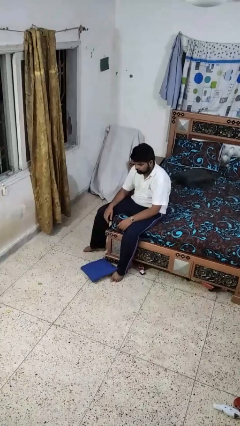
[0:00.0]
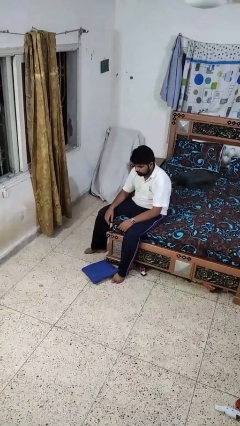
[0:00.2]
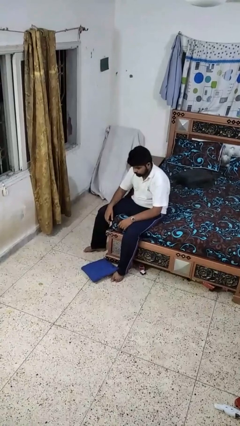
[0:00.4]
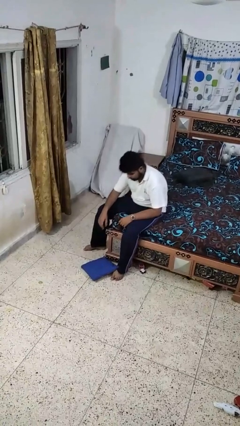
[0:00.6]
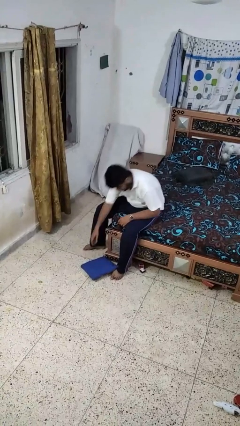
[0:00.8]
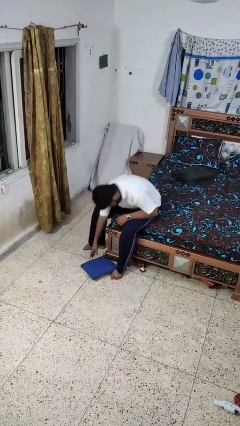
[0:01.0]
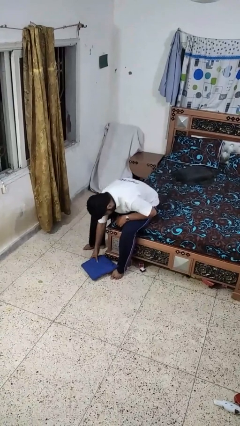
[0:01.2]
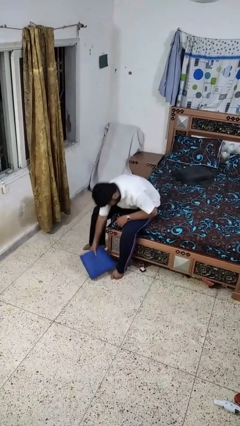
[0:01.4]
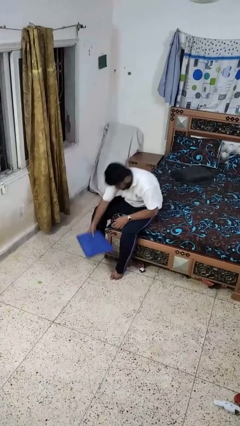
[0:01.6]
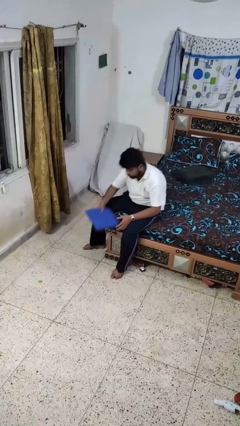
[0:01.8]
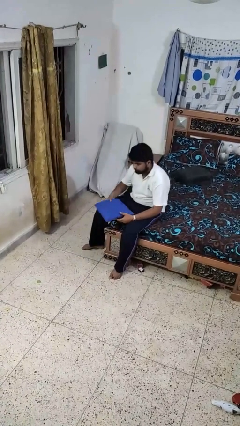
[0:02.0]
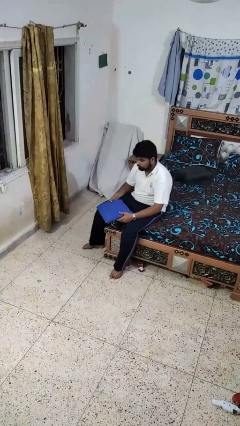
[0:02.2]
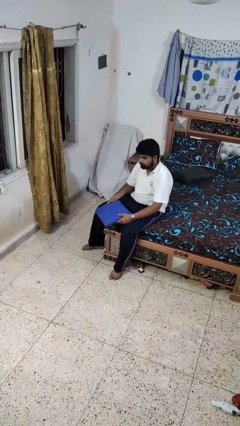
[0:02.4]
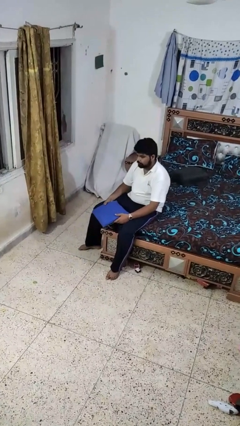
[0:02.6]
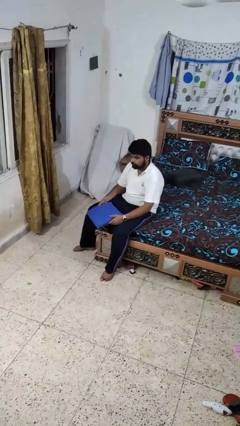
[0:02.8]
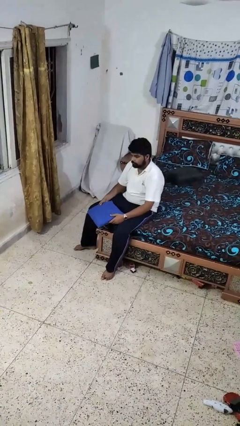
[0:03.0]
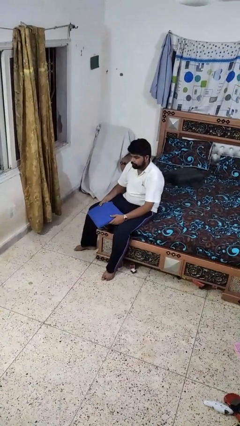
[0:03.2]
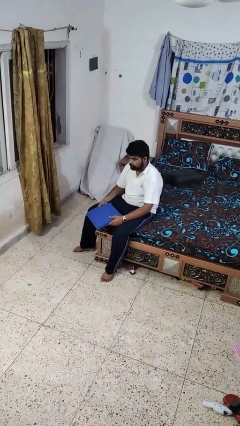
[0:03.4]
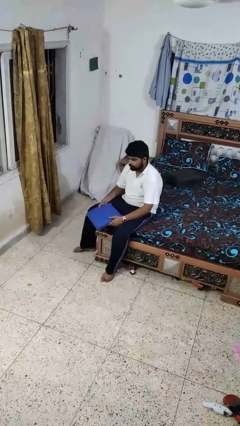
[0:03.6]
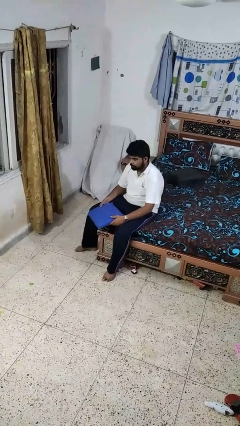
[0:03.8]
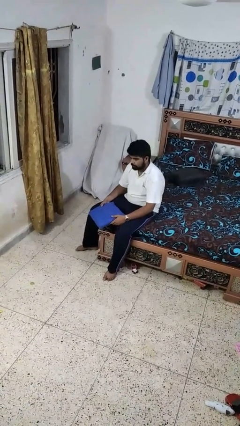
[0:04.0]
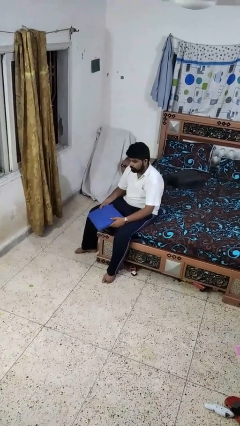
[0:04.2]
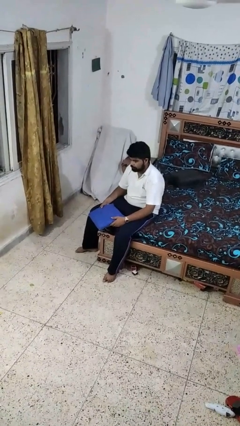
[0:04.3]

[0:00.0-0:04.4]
person picks up object from floor

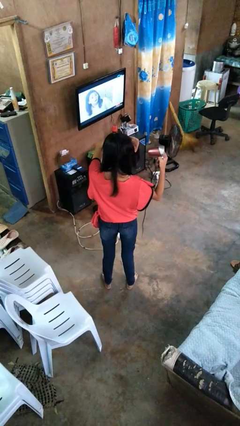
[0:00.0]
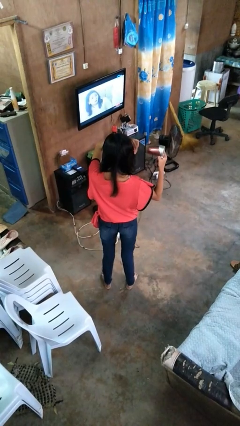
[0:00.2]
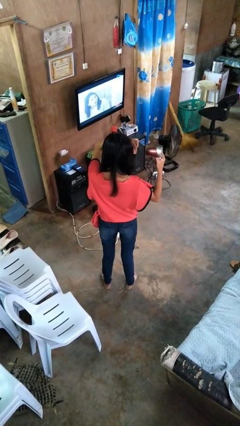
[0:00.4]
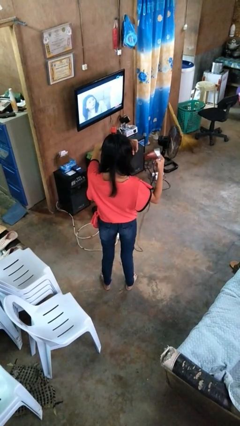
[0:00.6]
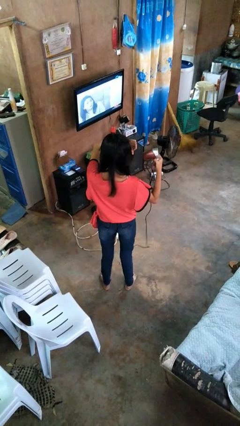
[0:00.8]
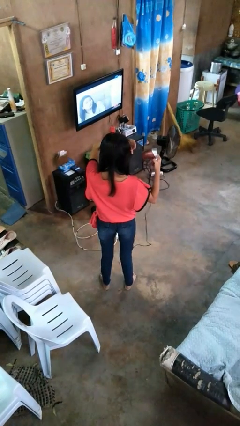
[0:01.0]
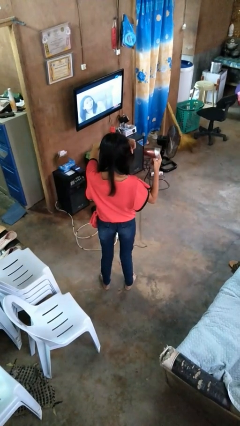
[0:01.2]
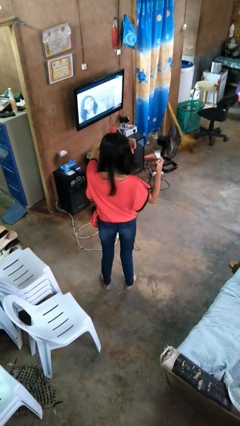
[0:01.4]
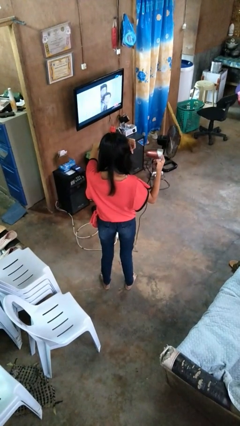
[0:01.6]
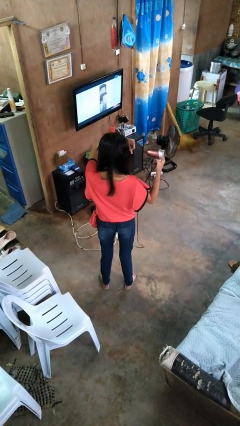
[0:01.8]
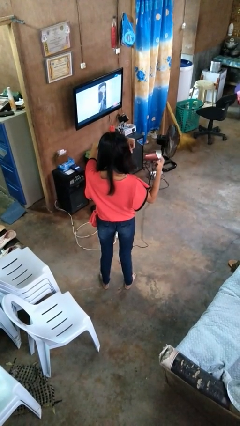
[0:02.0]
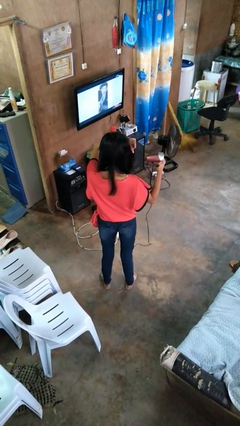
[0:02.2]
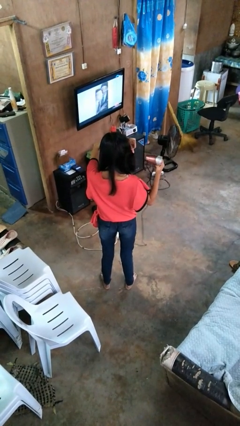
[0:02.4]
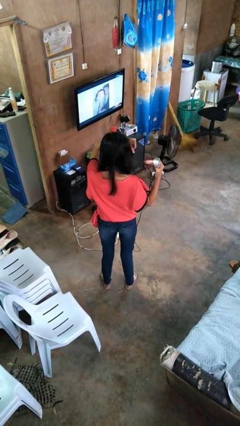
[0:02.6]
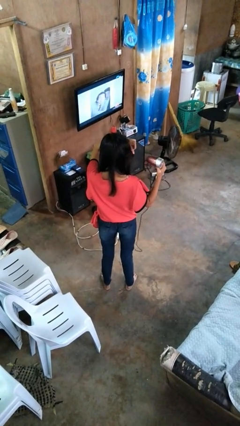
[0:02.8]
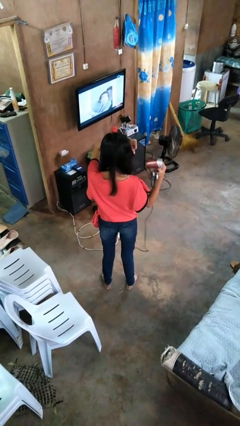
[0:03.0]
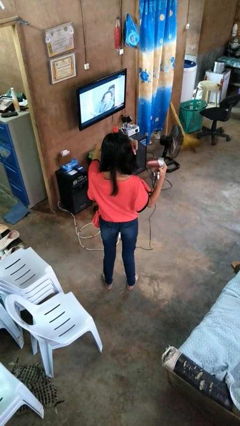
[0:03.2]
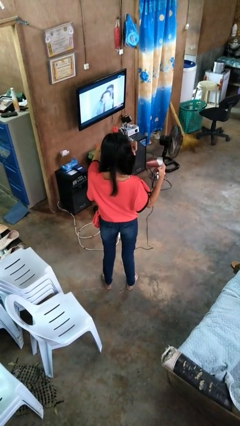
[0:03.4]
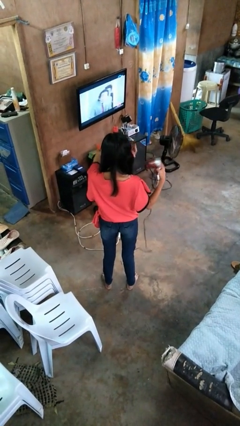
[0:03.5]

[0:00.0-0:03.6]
person dries hair with hairdryer

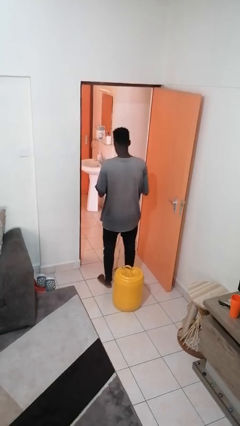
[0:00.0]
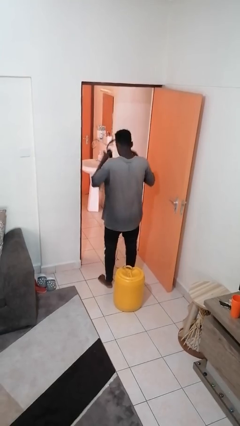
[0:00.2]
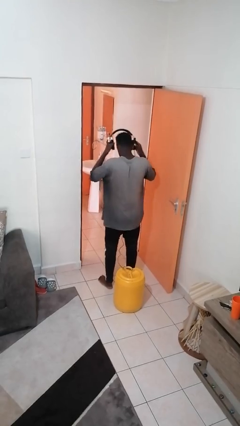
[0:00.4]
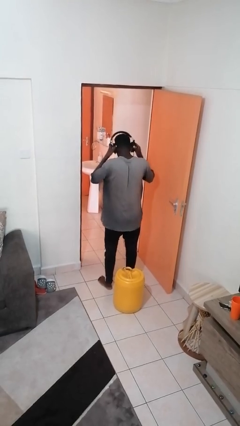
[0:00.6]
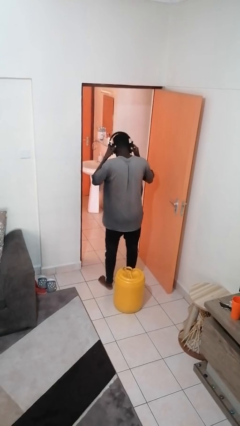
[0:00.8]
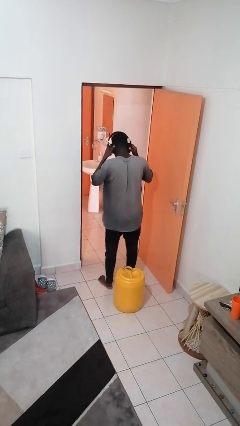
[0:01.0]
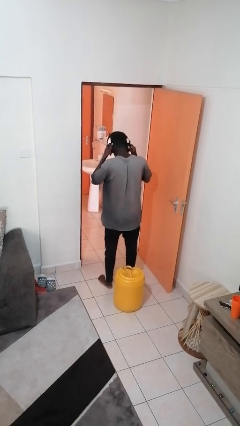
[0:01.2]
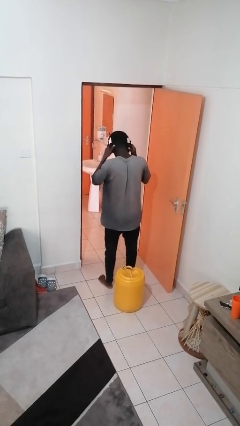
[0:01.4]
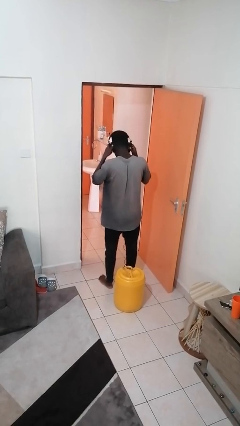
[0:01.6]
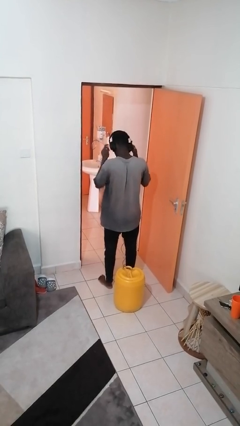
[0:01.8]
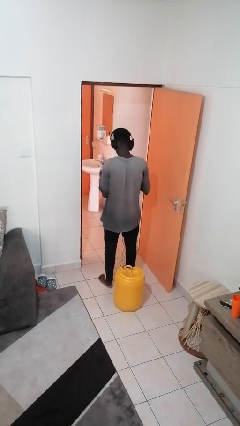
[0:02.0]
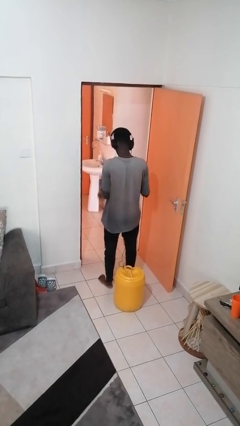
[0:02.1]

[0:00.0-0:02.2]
person puts on headphones

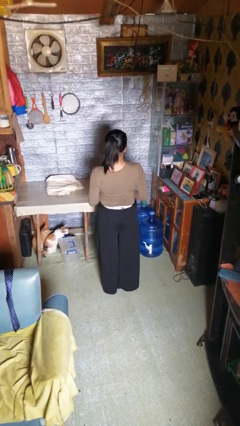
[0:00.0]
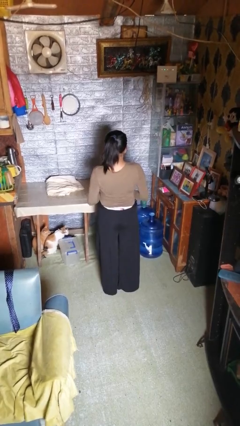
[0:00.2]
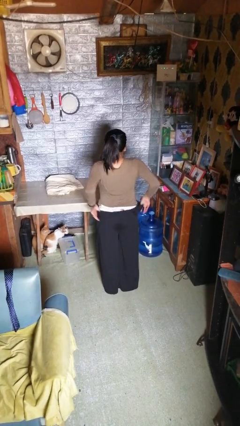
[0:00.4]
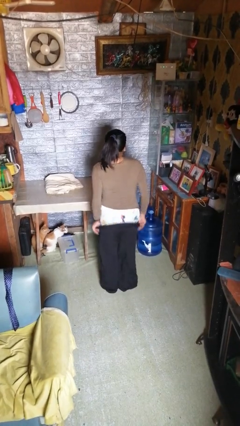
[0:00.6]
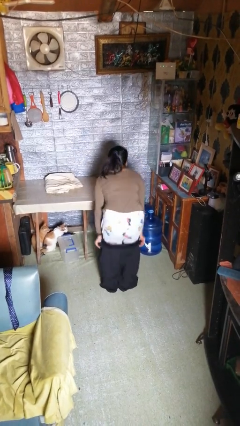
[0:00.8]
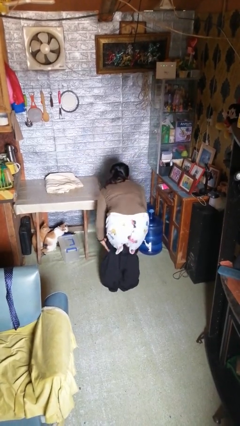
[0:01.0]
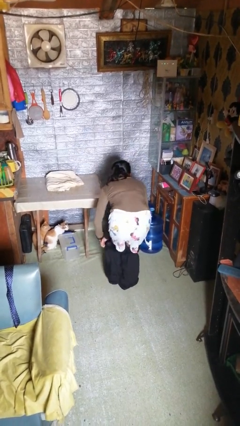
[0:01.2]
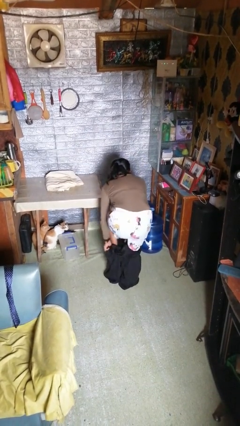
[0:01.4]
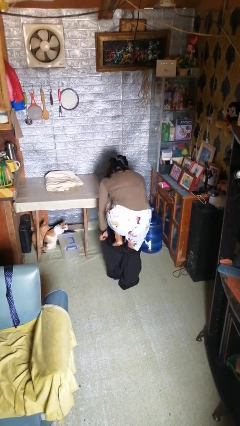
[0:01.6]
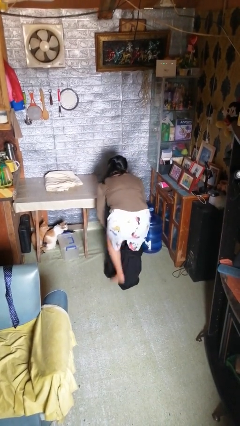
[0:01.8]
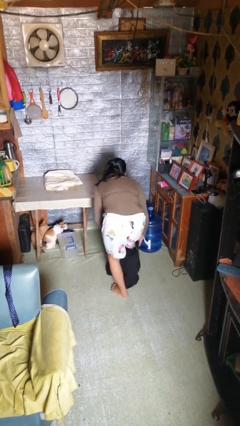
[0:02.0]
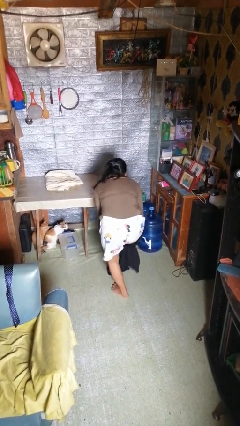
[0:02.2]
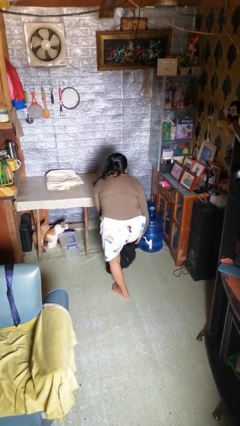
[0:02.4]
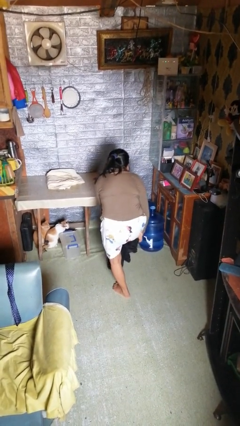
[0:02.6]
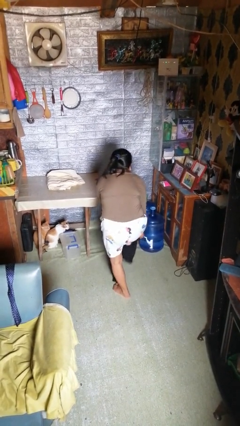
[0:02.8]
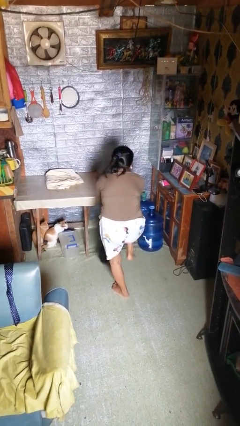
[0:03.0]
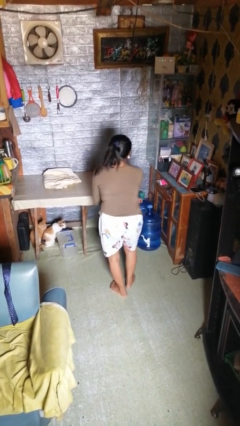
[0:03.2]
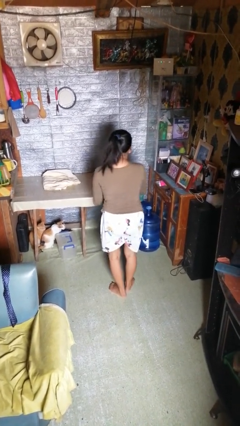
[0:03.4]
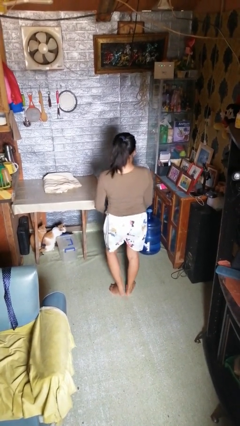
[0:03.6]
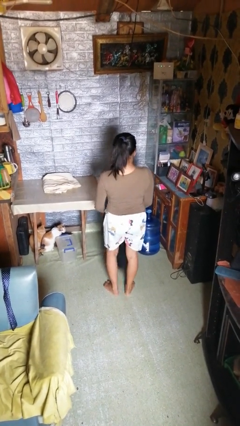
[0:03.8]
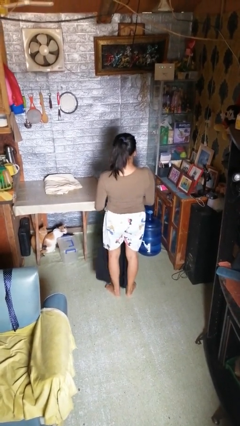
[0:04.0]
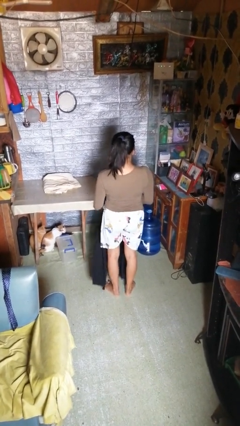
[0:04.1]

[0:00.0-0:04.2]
person takes off pants

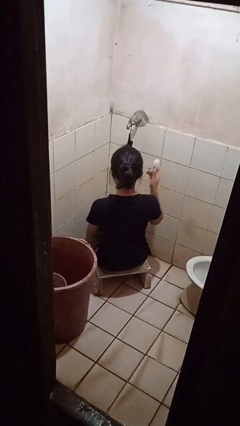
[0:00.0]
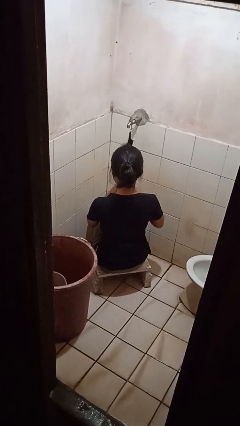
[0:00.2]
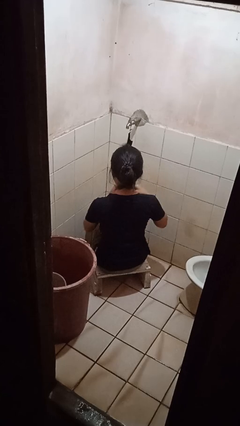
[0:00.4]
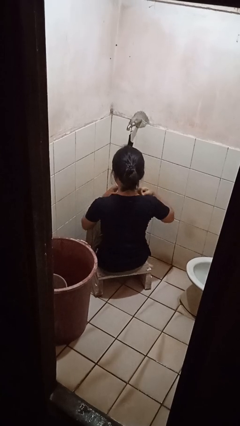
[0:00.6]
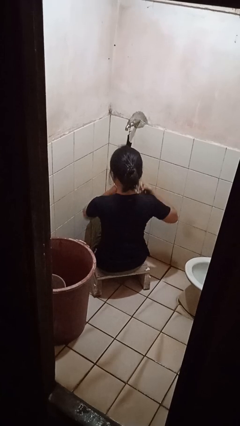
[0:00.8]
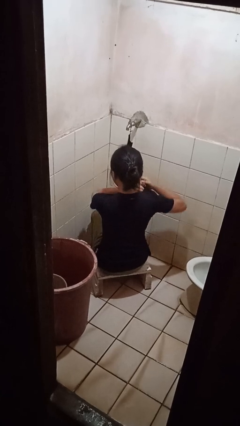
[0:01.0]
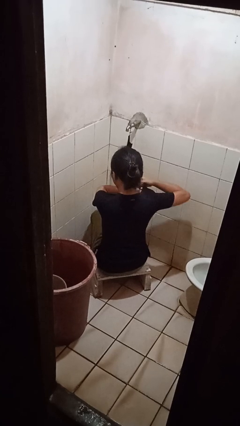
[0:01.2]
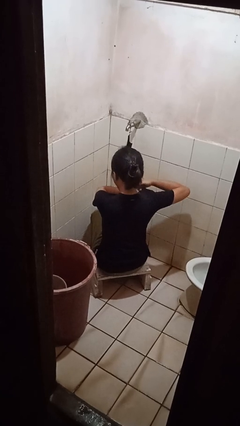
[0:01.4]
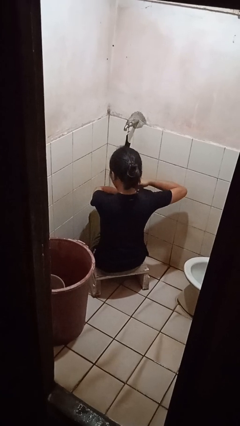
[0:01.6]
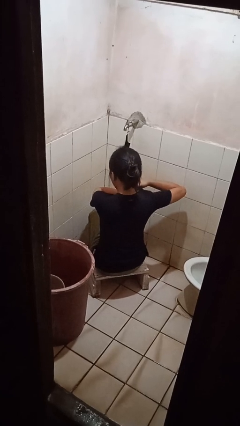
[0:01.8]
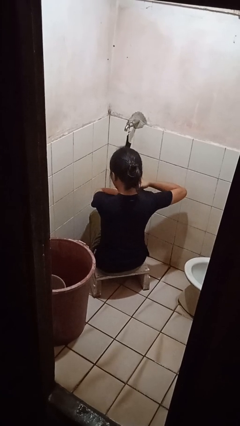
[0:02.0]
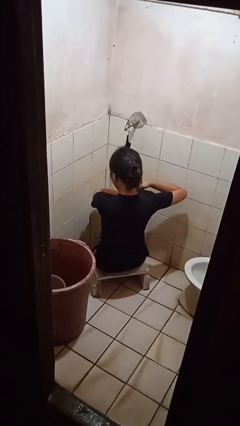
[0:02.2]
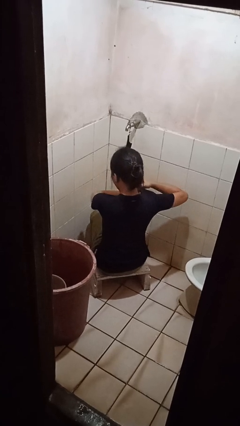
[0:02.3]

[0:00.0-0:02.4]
person applies deodorant

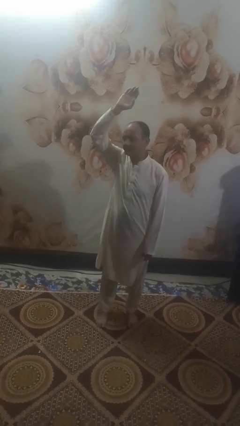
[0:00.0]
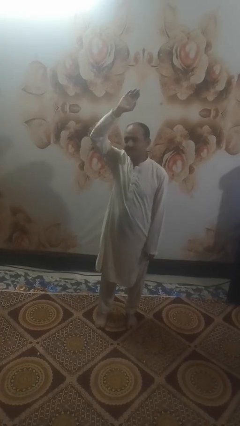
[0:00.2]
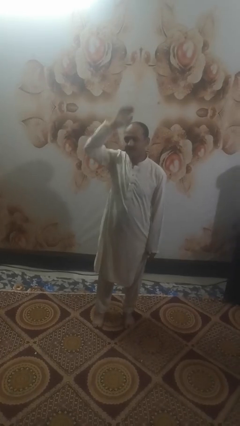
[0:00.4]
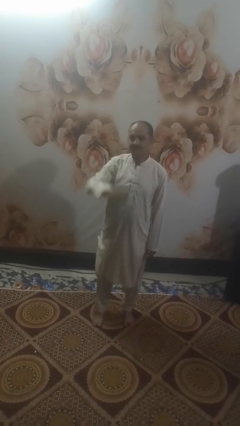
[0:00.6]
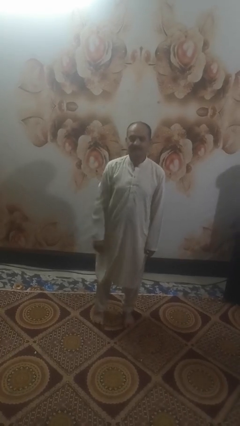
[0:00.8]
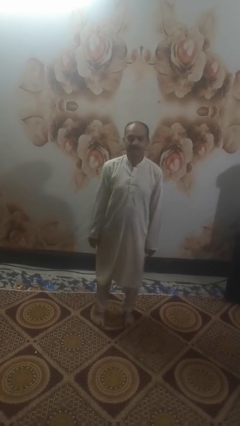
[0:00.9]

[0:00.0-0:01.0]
person gestures lower hand
